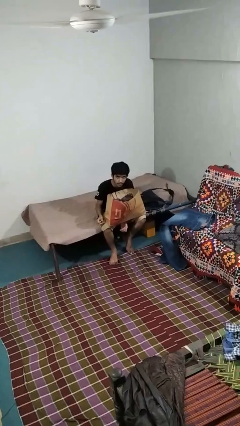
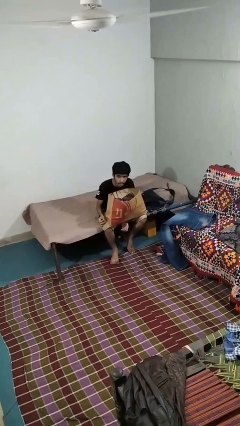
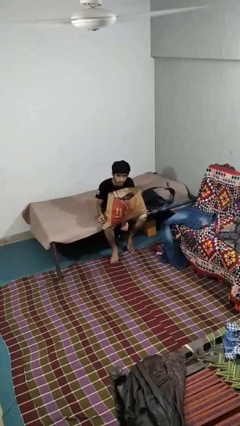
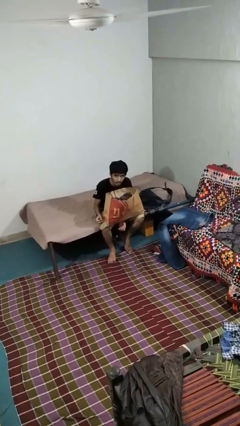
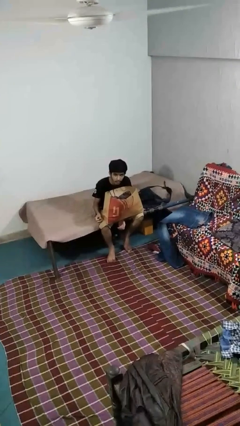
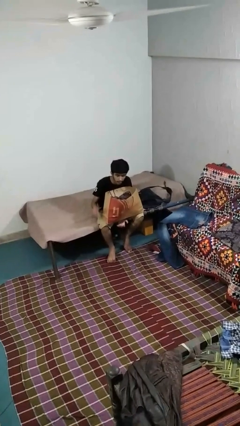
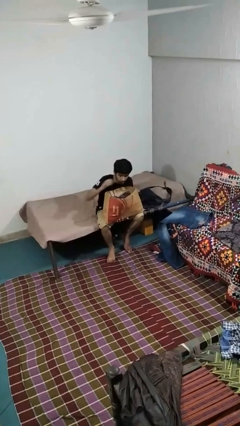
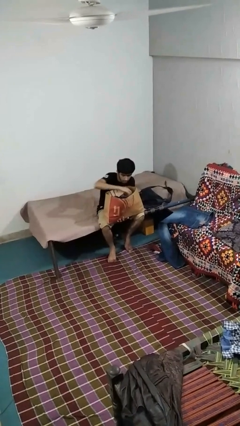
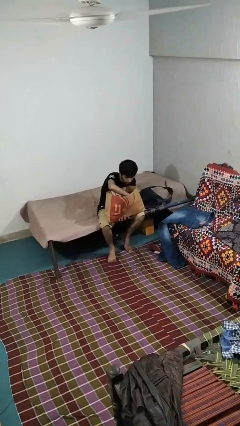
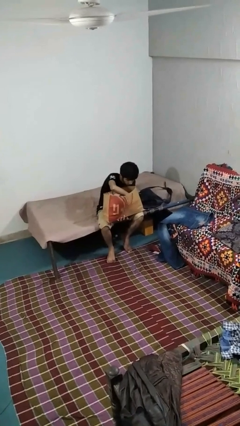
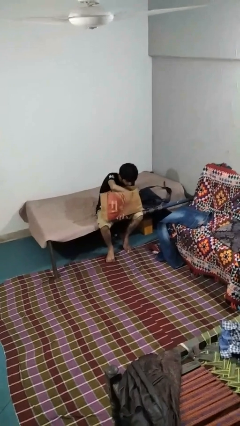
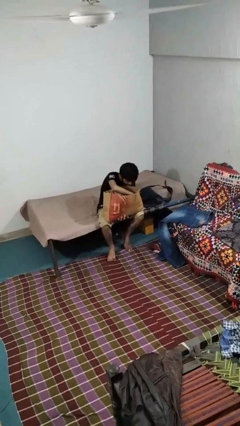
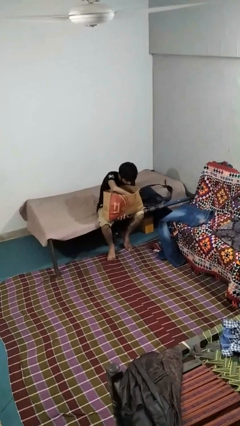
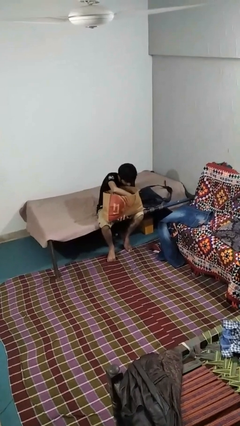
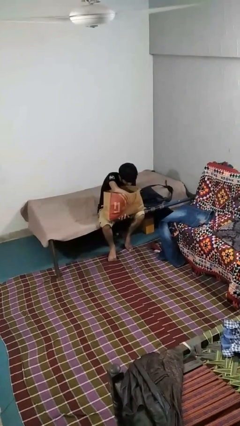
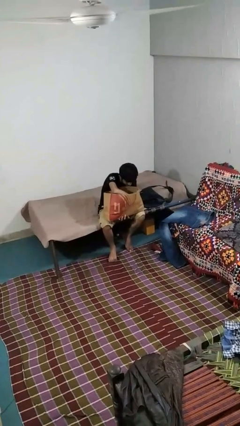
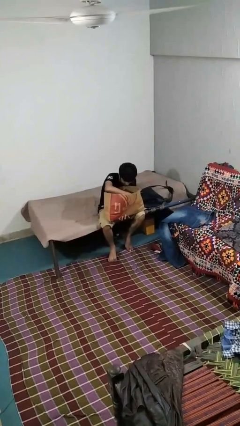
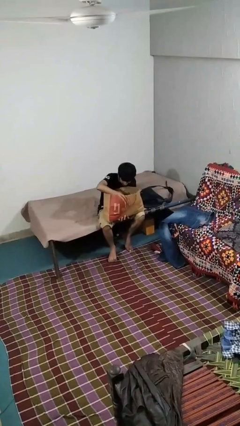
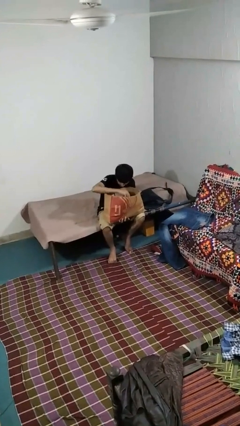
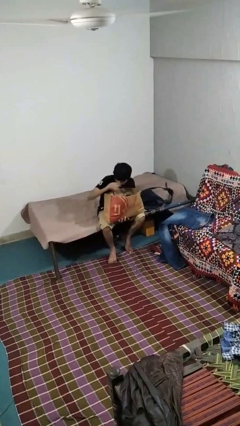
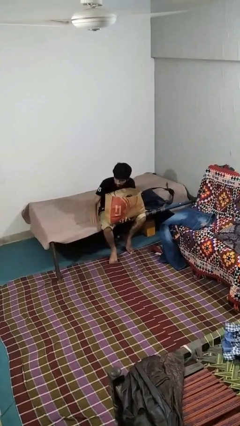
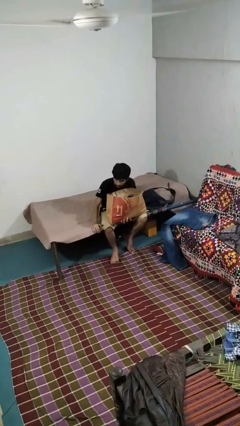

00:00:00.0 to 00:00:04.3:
person searches in bag

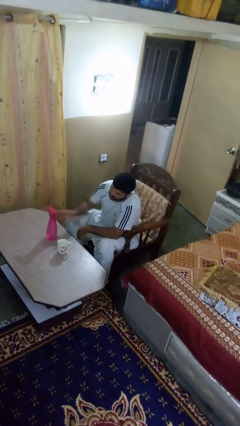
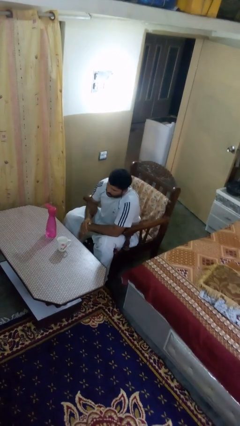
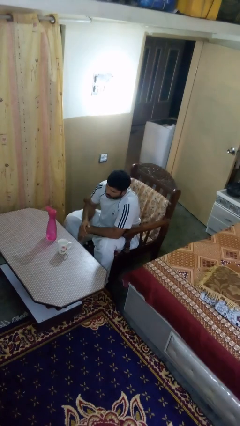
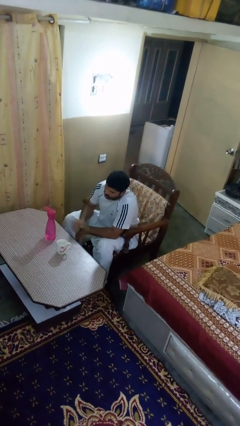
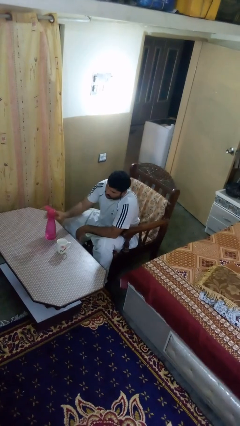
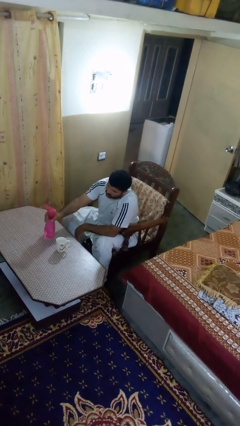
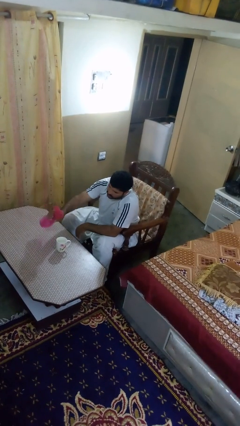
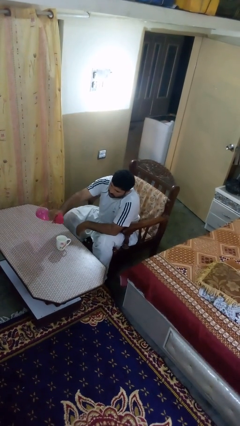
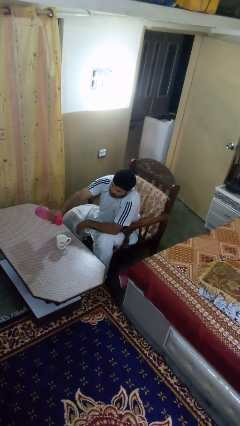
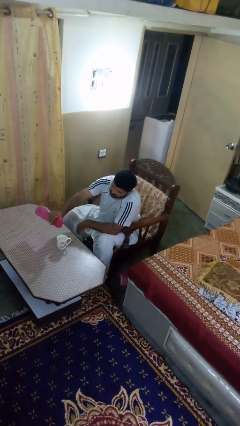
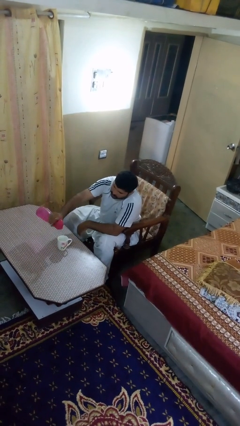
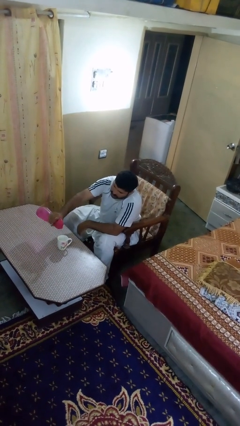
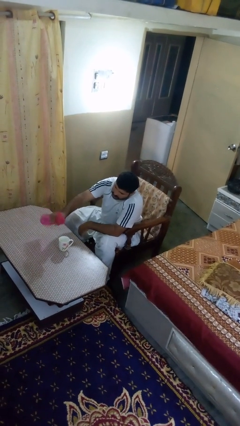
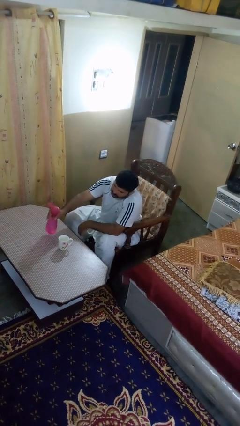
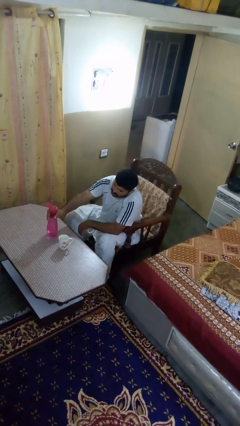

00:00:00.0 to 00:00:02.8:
person pours liquid into cup

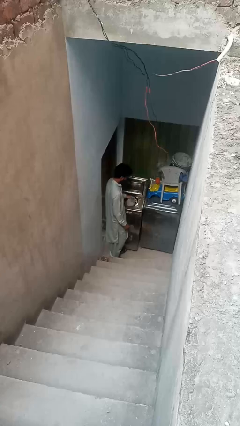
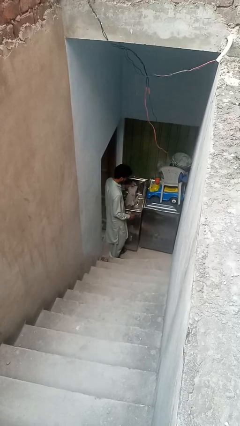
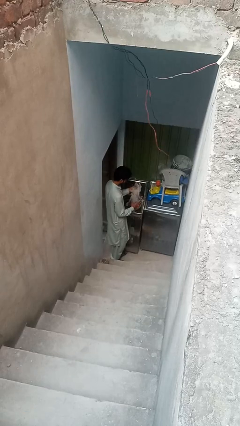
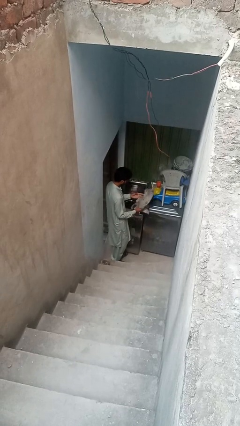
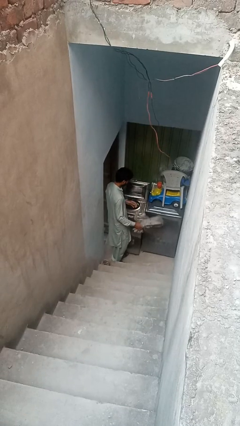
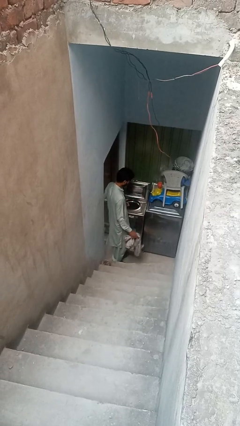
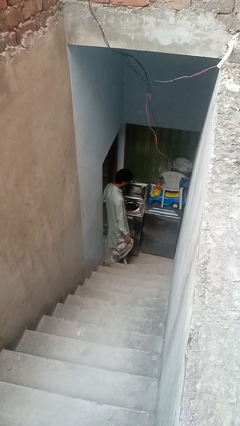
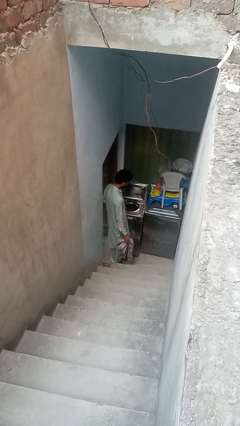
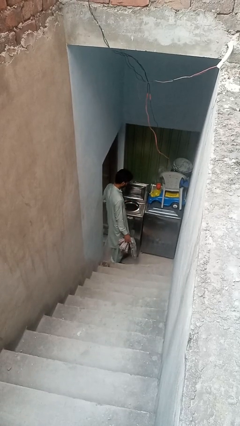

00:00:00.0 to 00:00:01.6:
person unloads clotheswasher

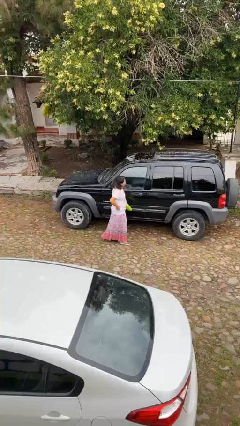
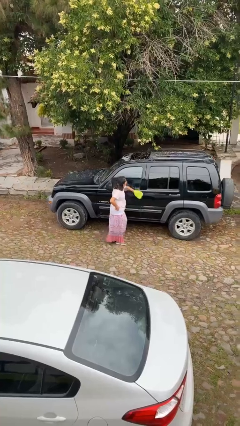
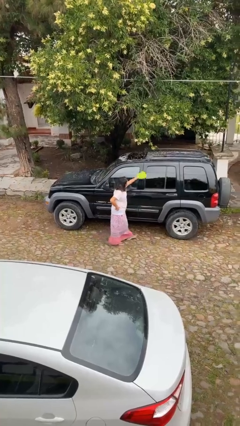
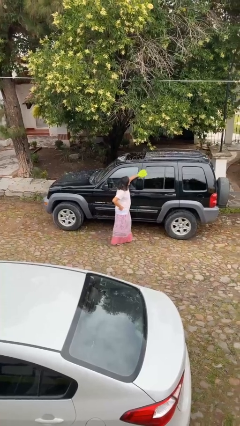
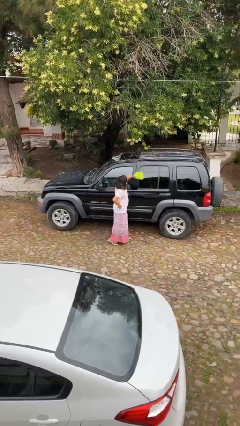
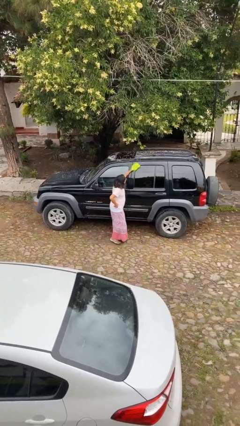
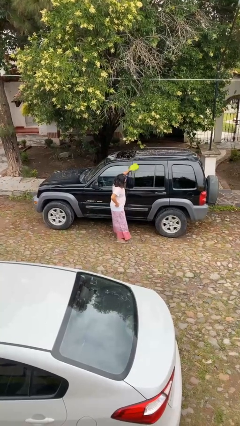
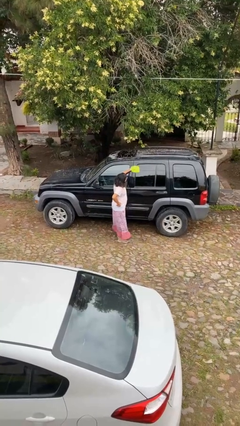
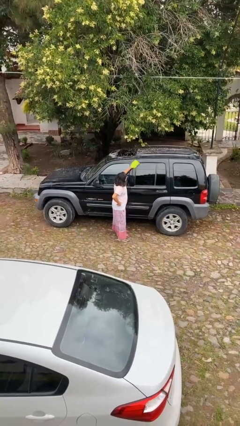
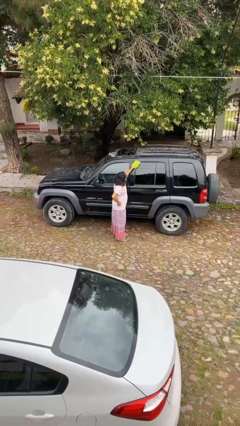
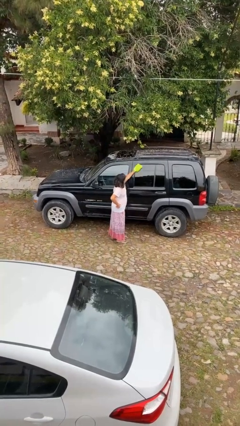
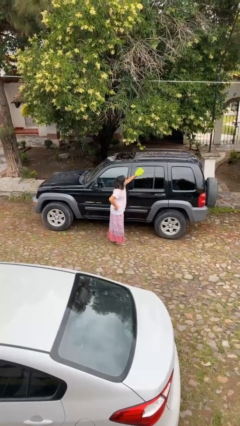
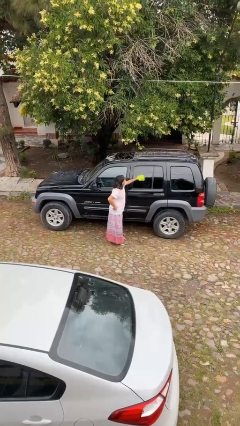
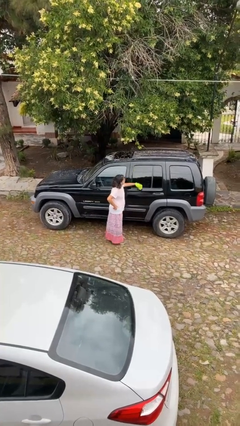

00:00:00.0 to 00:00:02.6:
person polishes car with rag

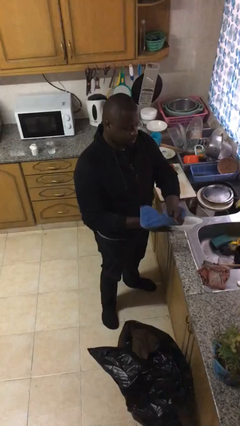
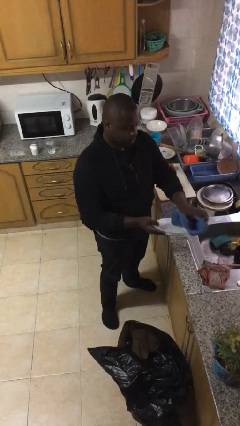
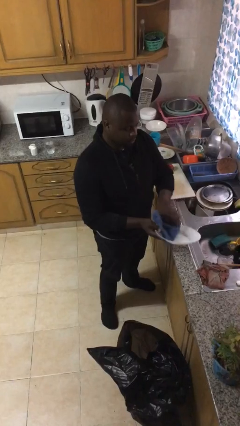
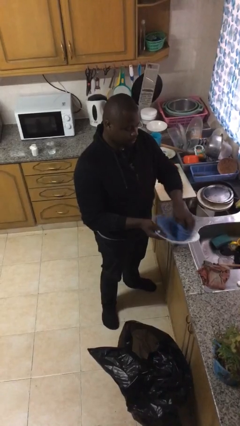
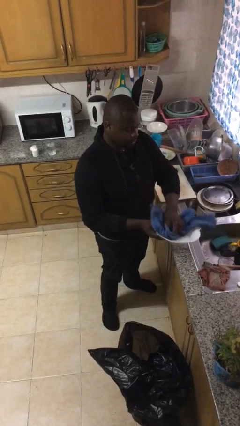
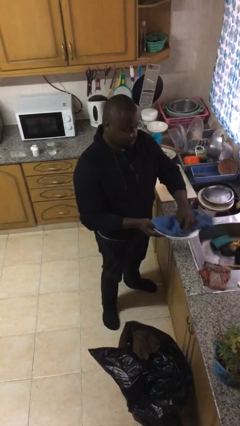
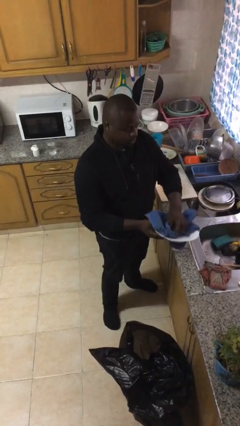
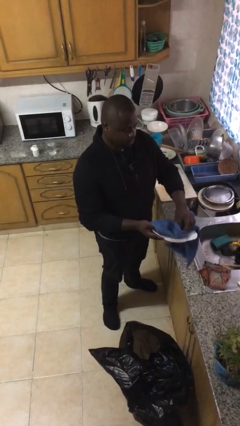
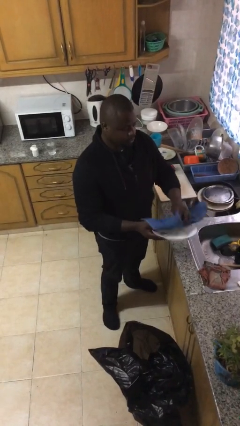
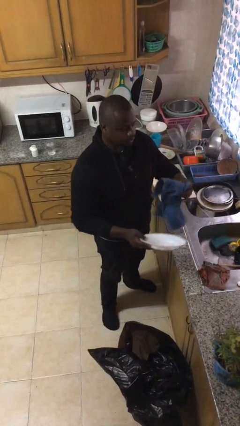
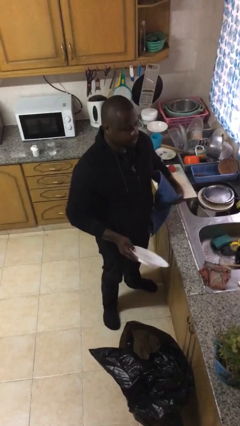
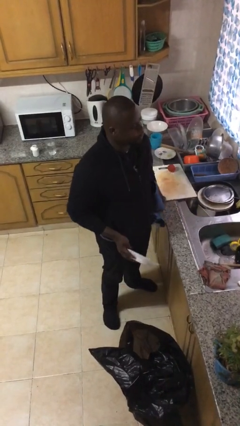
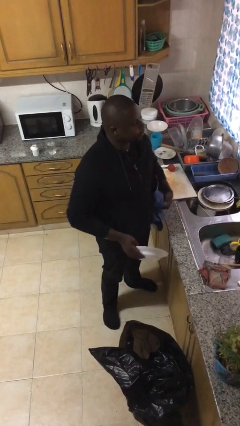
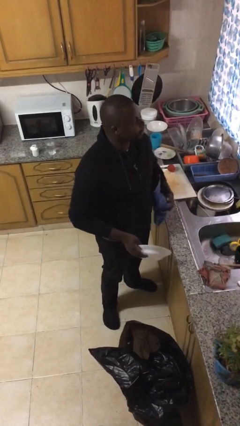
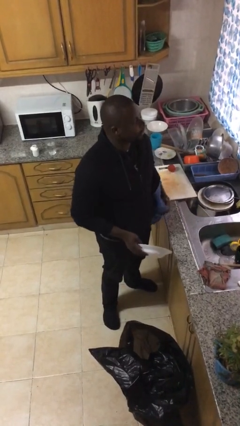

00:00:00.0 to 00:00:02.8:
person dries dish

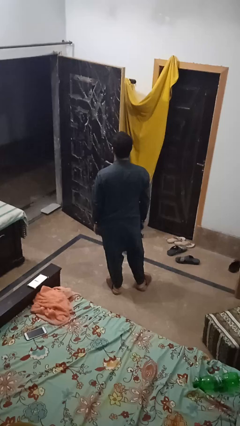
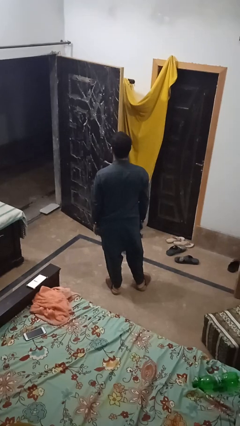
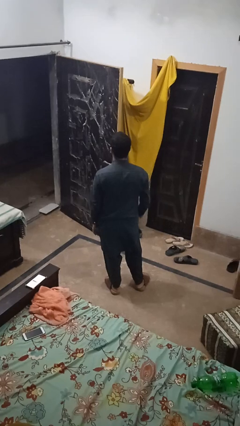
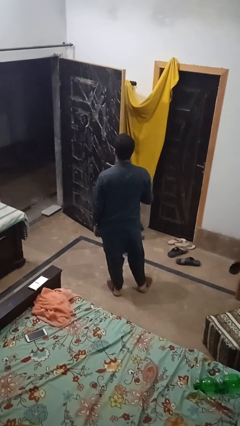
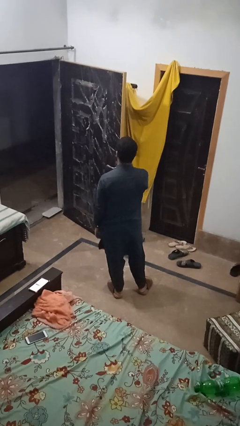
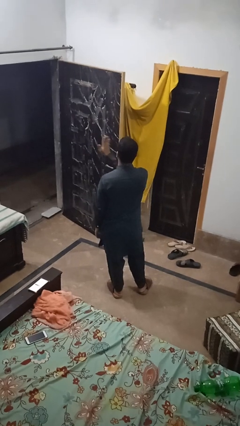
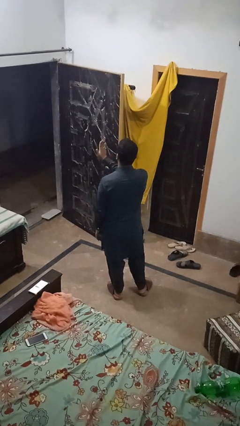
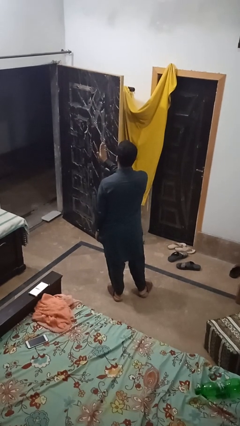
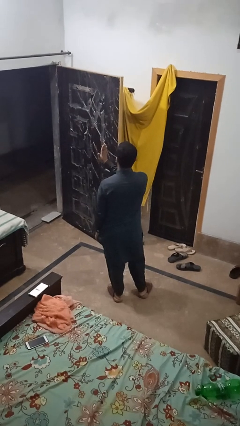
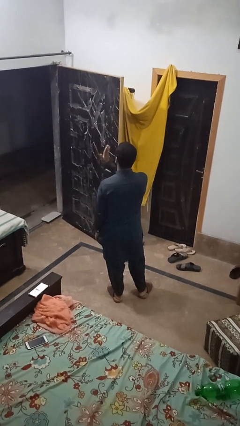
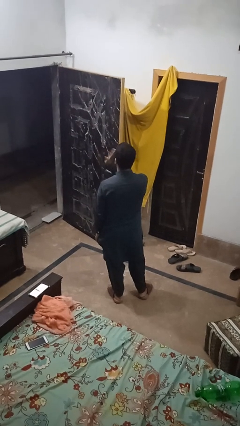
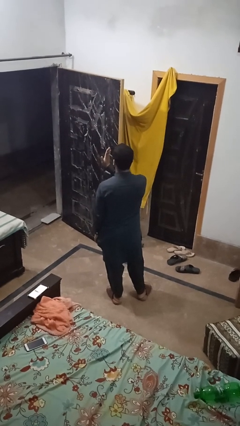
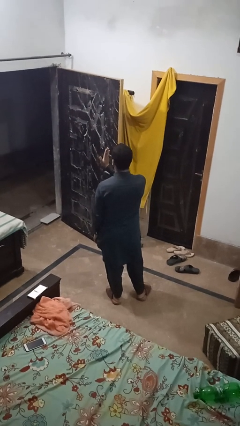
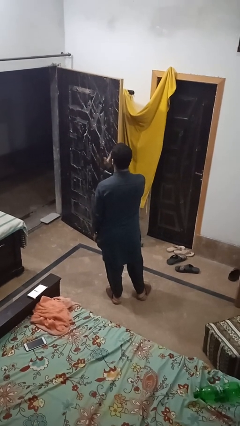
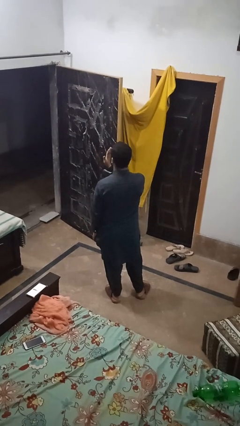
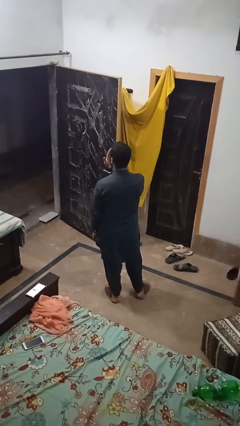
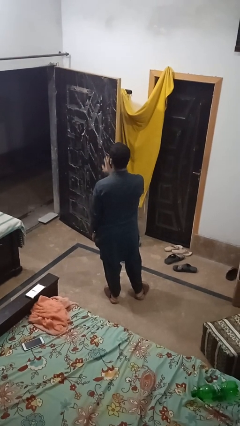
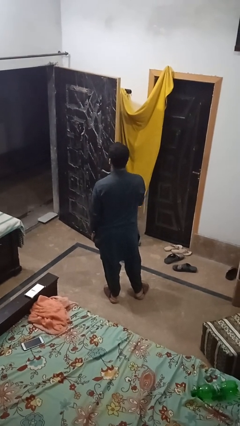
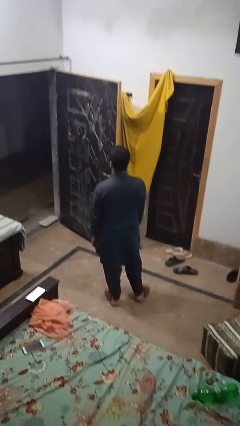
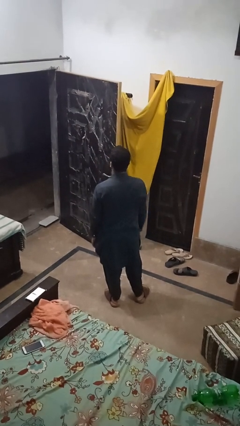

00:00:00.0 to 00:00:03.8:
person gestures stop

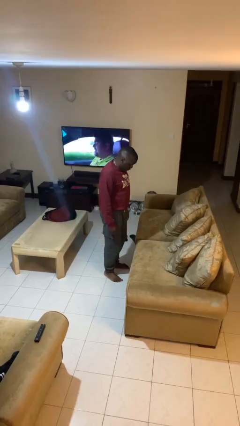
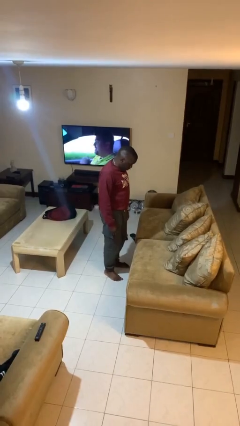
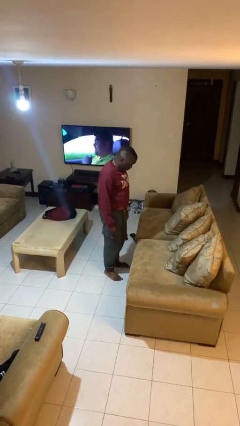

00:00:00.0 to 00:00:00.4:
person climbs on couch
